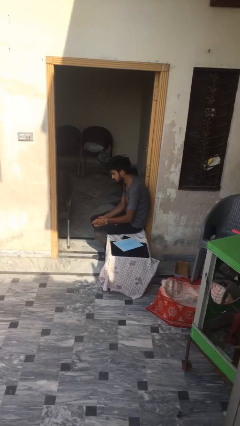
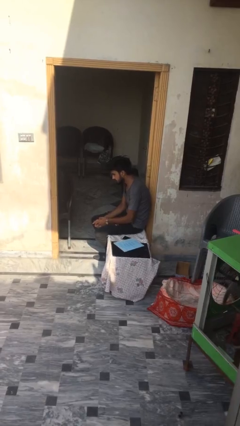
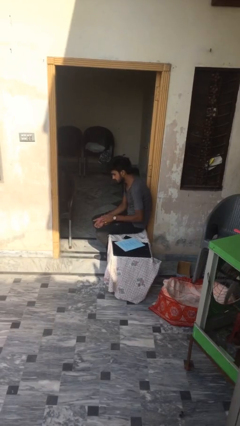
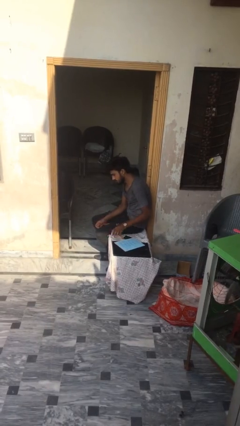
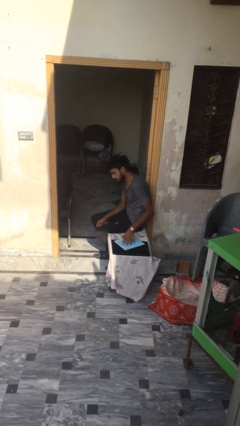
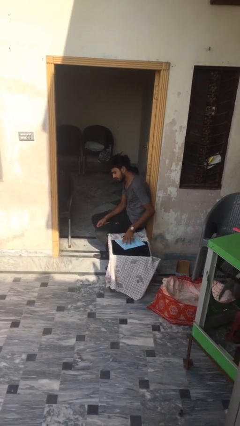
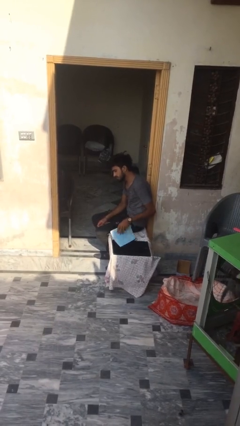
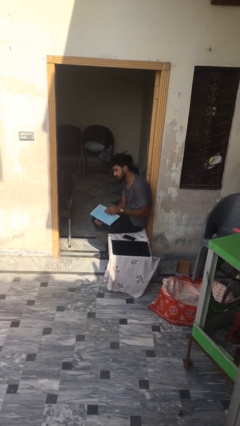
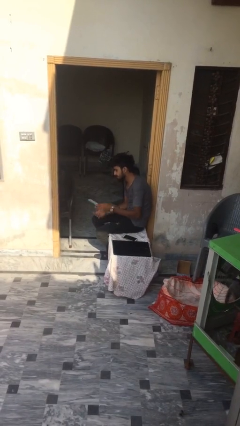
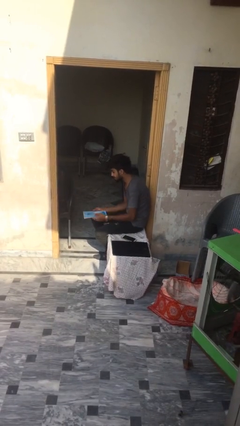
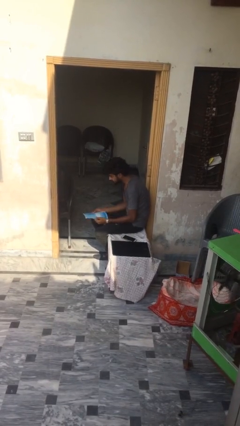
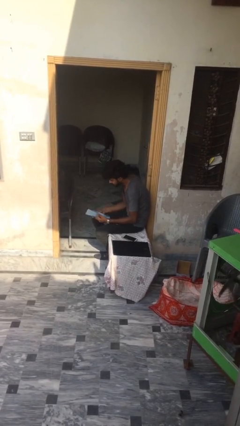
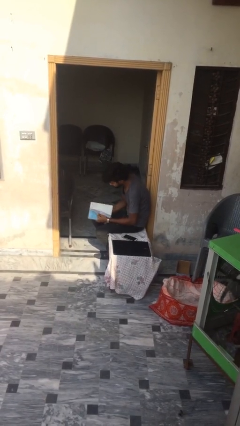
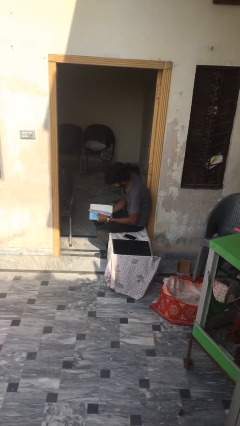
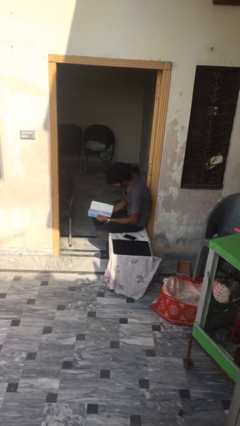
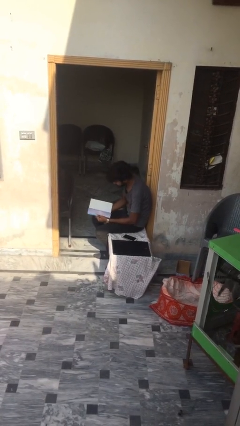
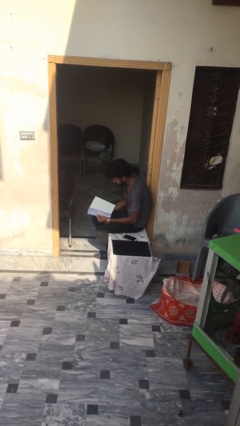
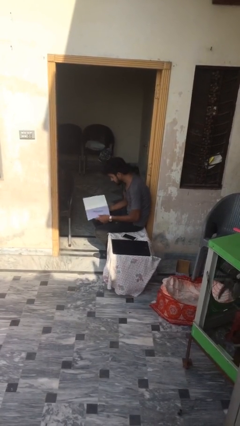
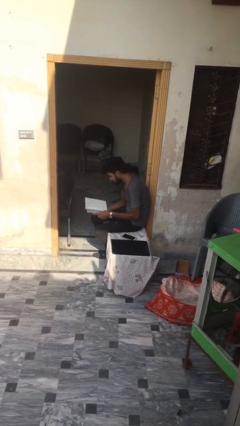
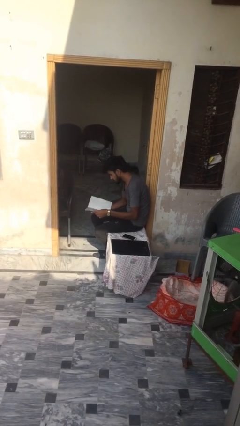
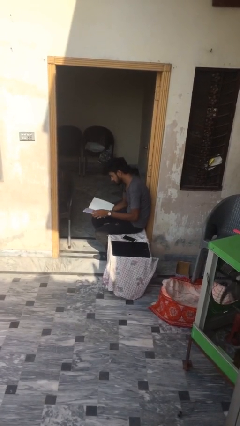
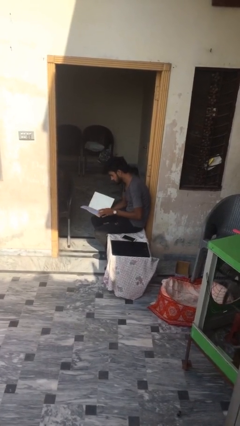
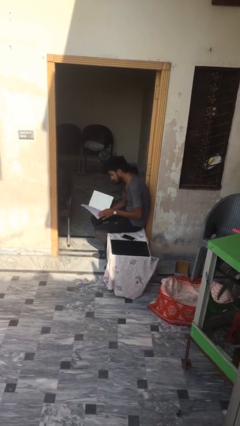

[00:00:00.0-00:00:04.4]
person picks up object from table

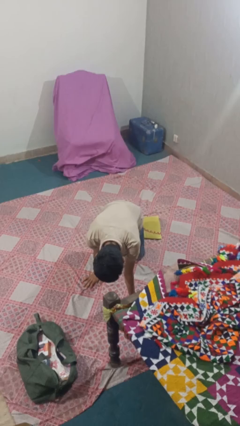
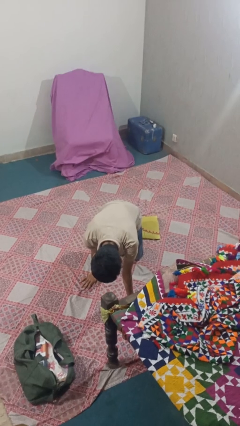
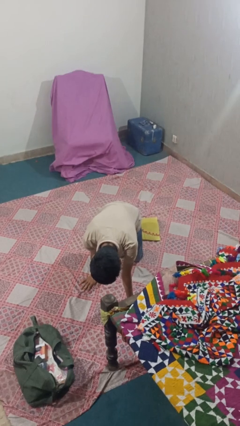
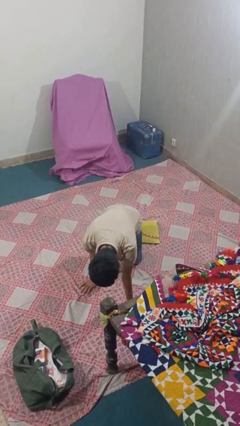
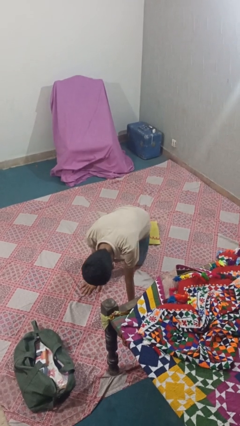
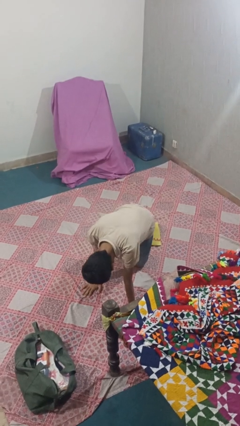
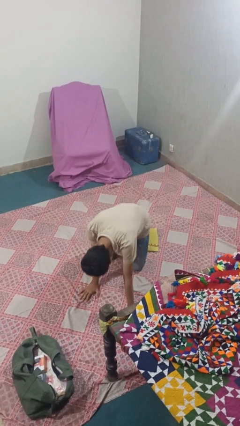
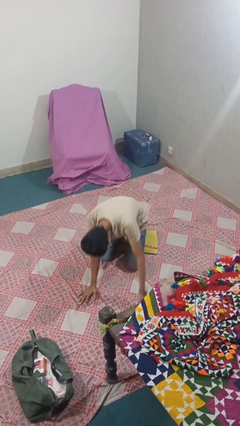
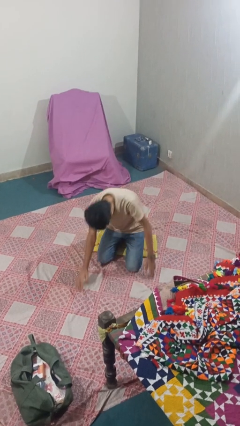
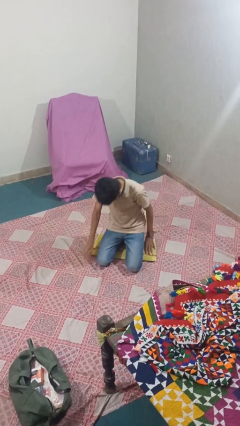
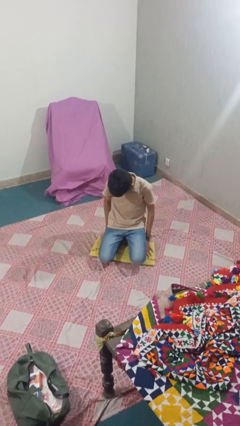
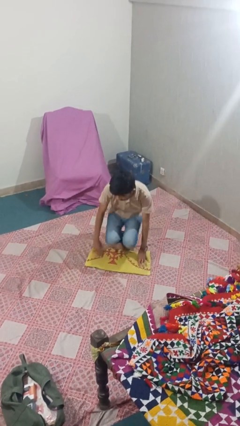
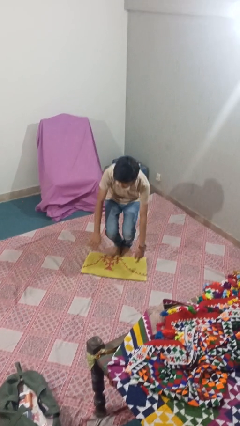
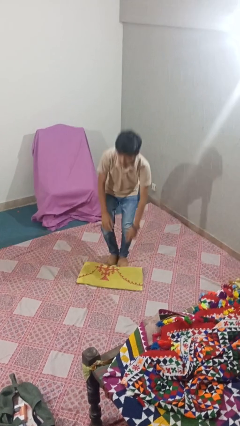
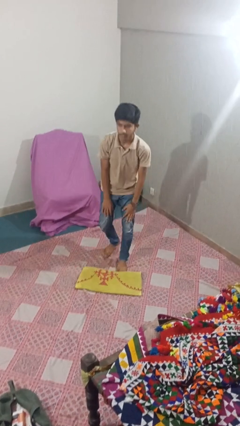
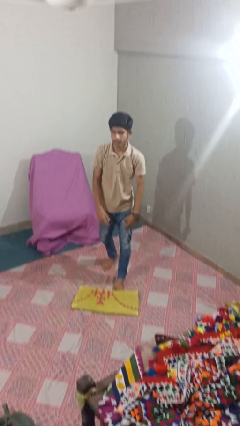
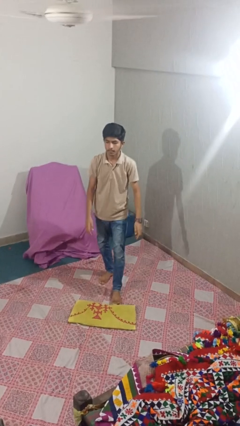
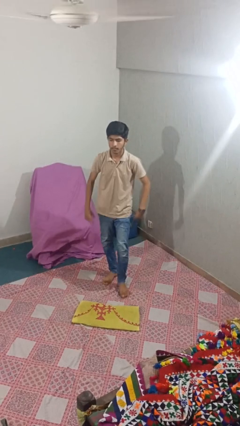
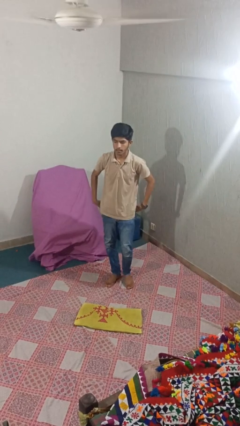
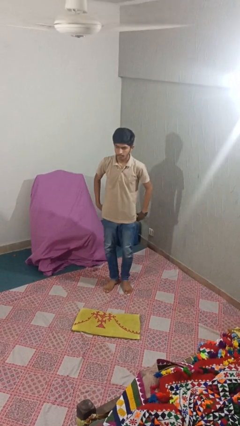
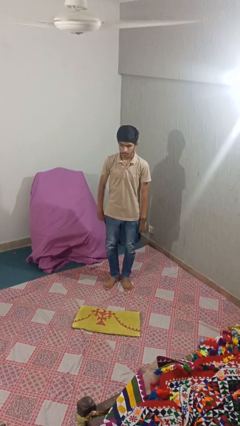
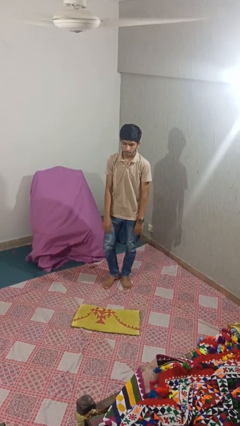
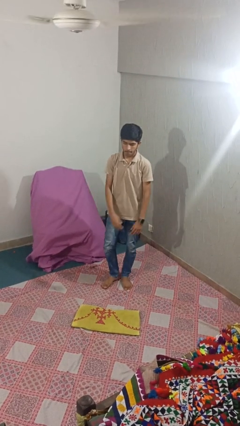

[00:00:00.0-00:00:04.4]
person stands up from floor

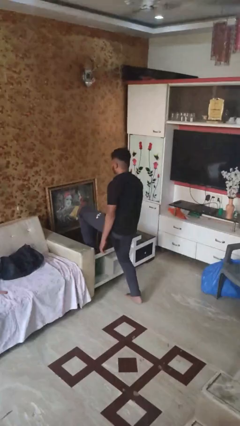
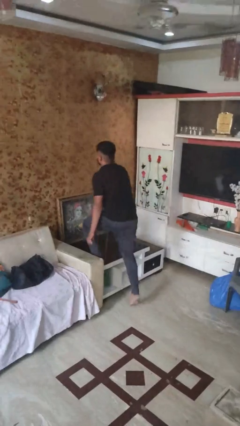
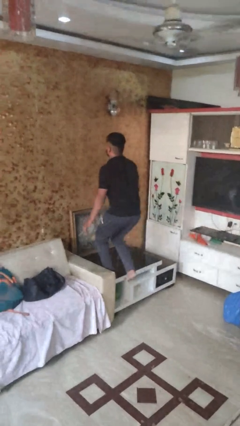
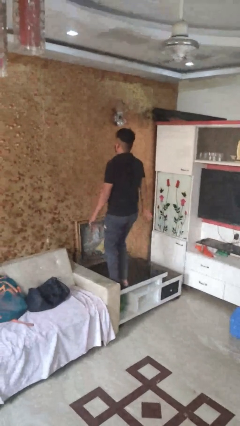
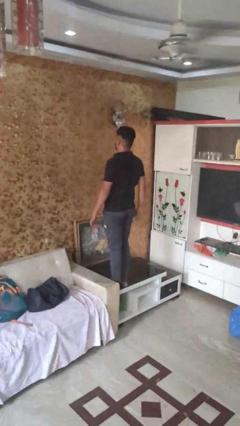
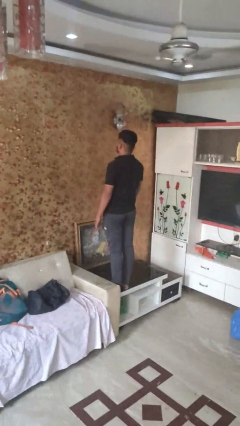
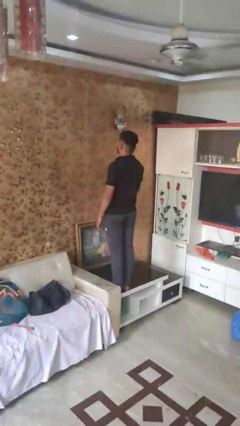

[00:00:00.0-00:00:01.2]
person climbs on table

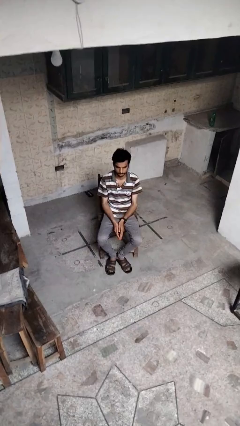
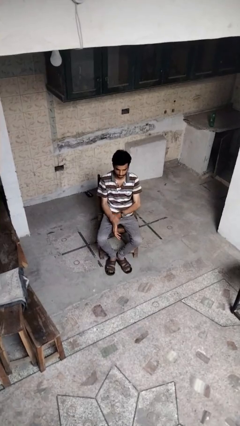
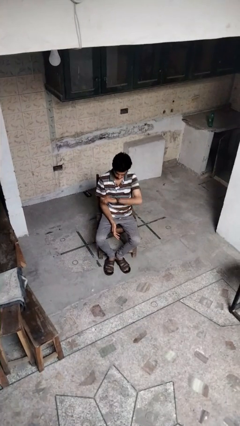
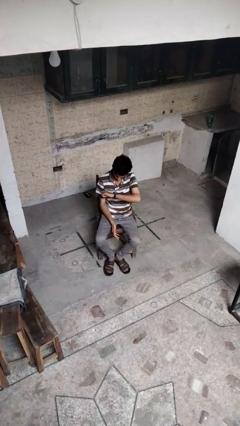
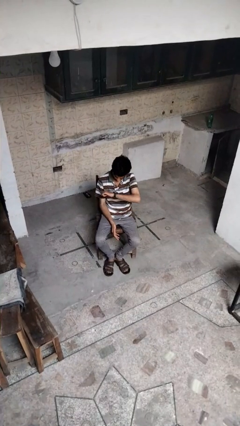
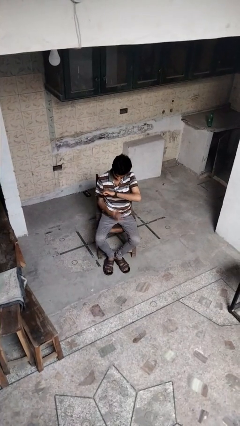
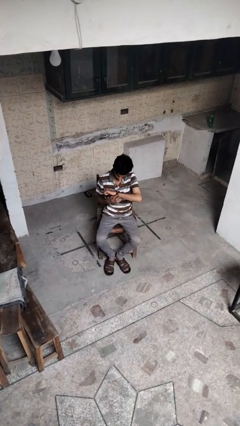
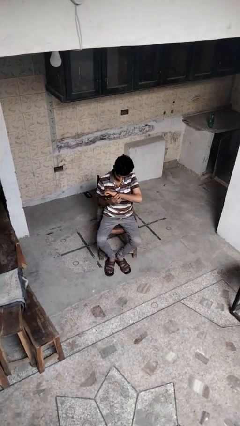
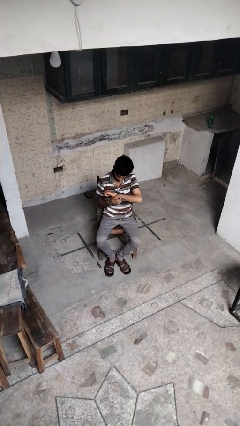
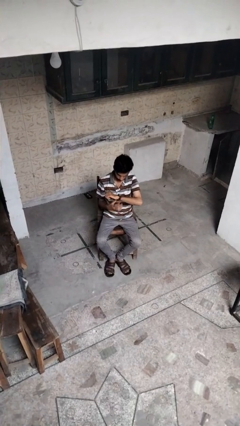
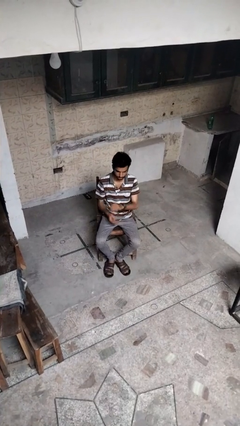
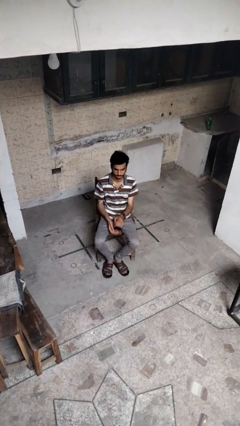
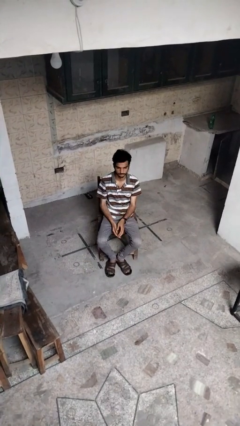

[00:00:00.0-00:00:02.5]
person looks at wristwatch

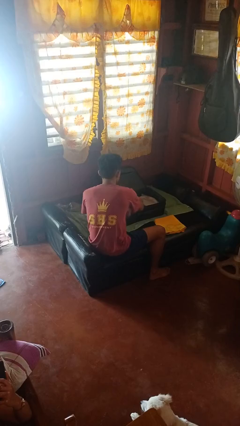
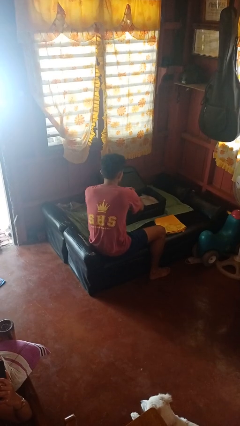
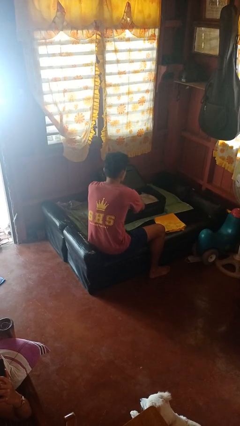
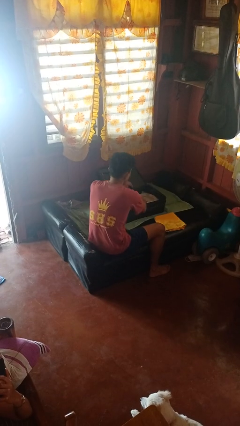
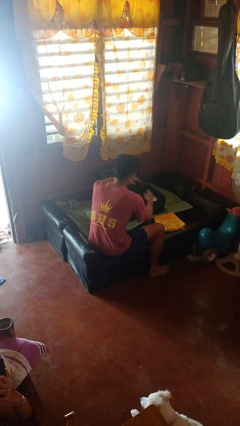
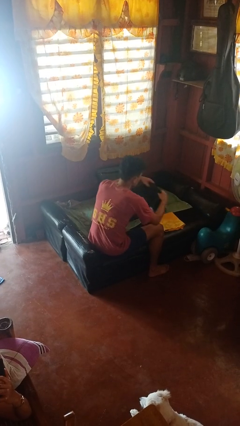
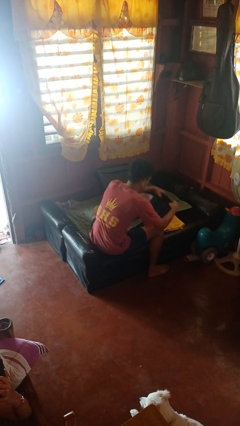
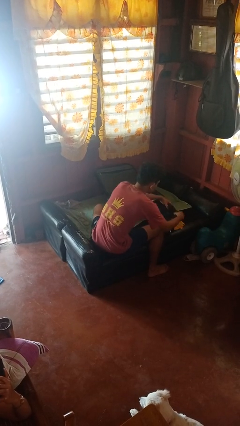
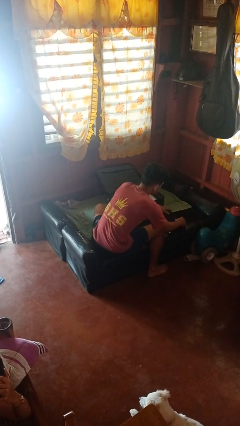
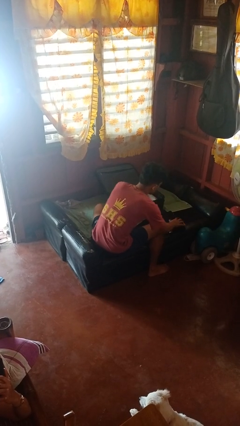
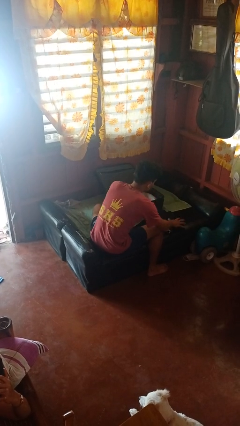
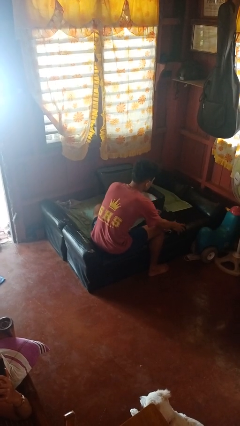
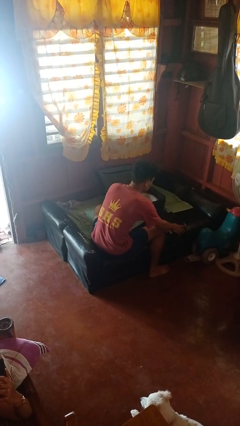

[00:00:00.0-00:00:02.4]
person unloads clothes from suitcase

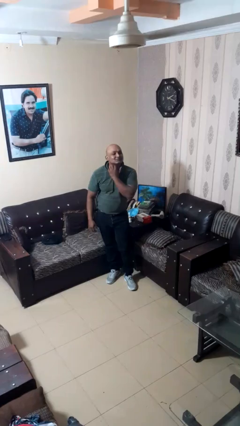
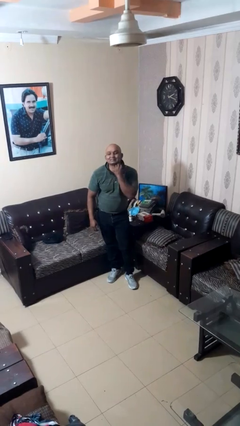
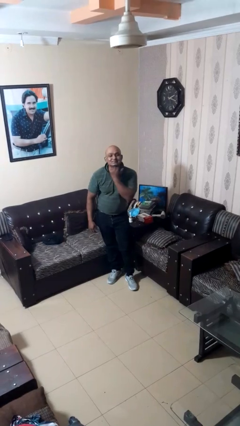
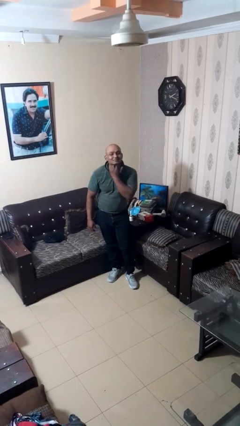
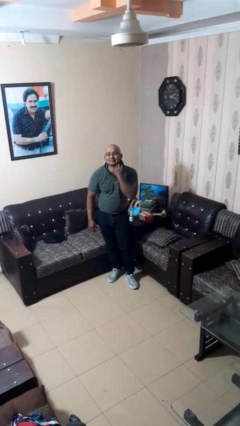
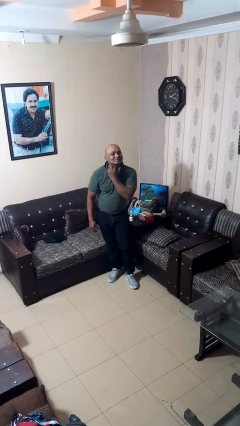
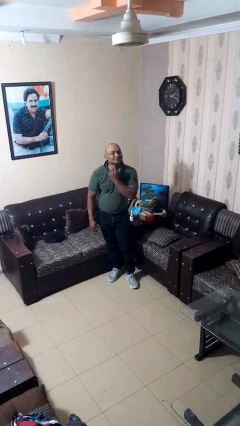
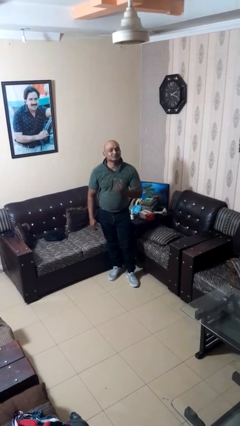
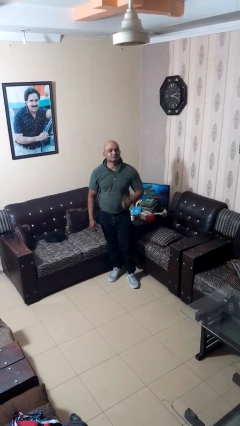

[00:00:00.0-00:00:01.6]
person gestures cut

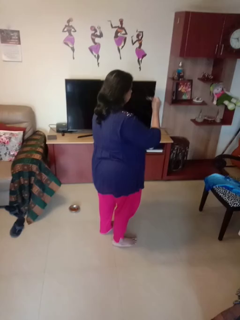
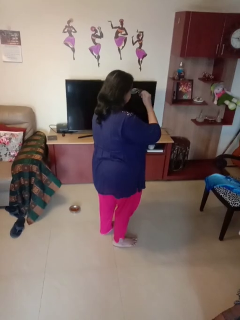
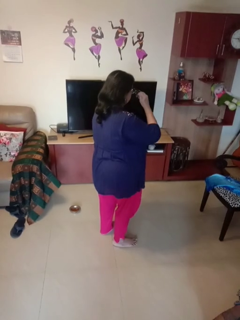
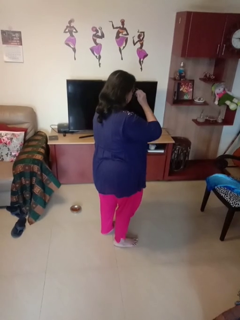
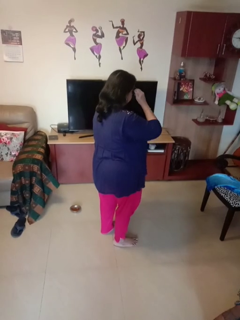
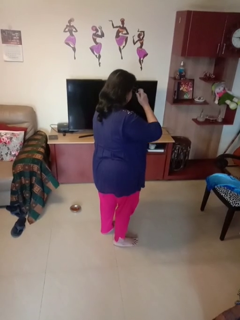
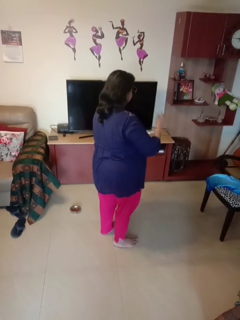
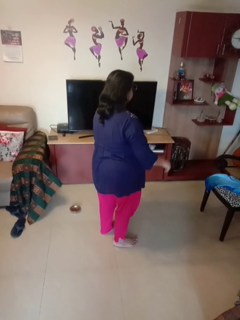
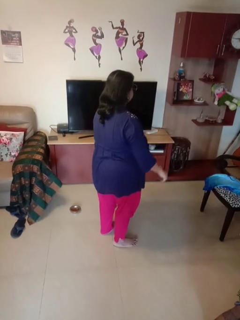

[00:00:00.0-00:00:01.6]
person puts on sunglasses
